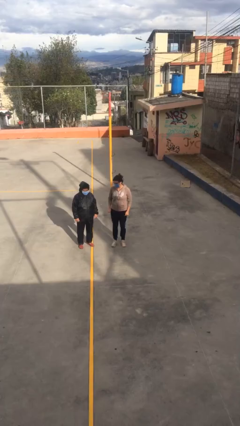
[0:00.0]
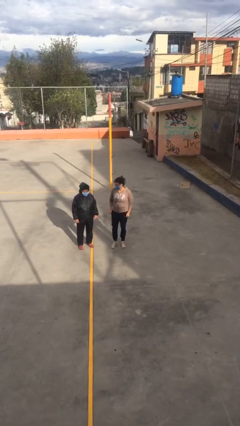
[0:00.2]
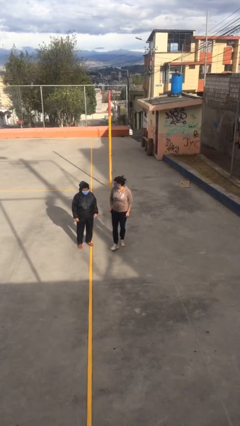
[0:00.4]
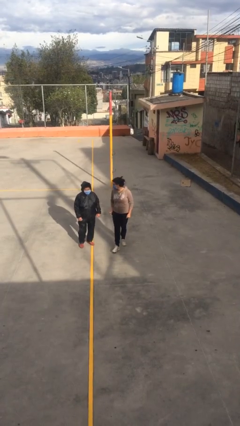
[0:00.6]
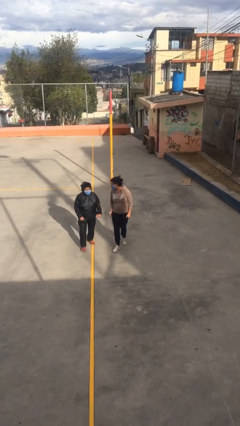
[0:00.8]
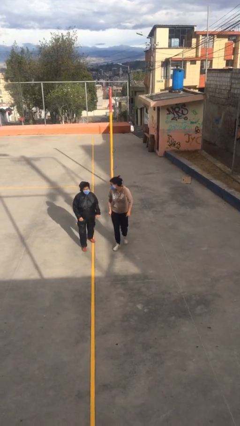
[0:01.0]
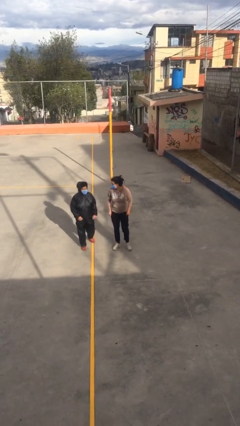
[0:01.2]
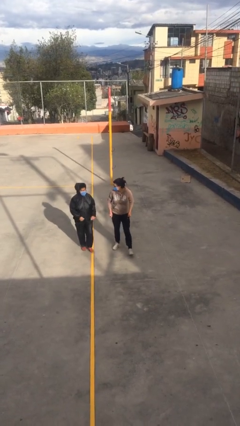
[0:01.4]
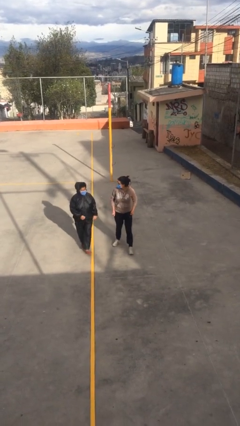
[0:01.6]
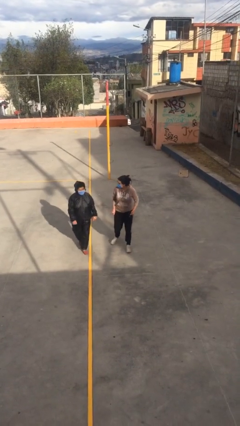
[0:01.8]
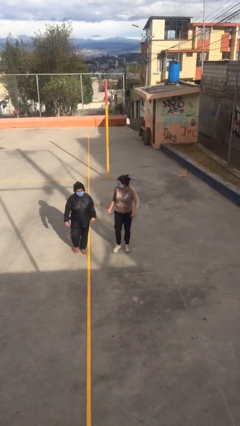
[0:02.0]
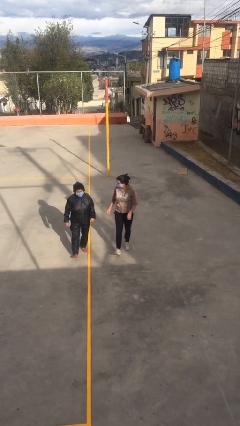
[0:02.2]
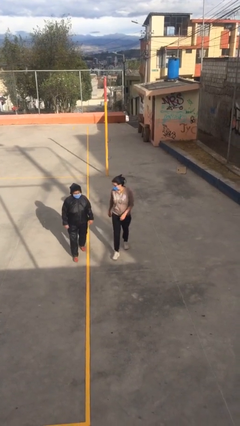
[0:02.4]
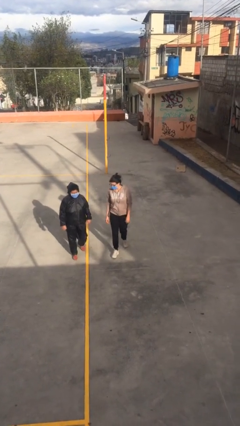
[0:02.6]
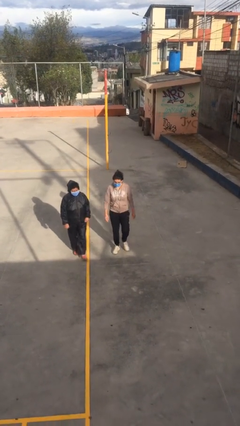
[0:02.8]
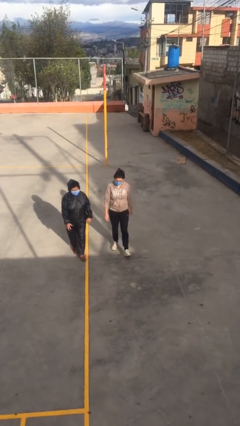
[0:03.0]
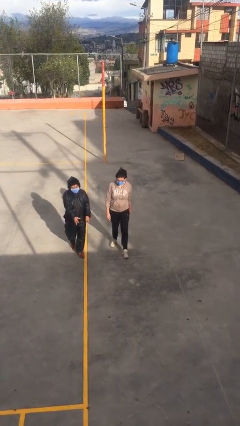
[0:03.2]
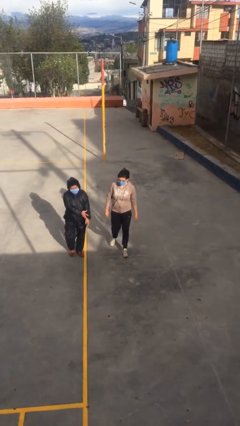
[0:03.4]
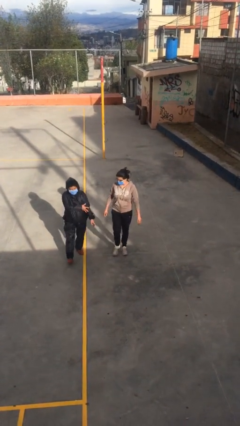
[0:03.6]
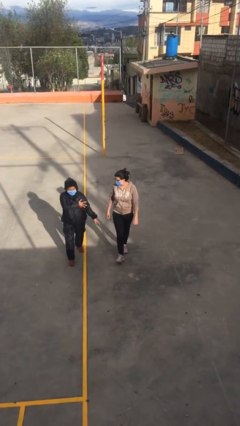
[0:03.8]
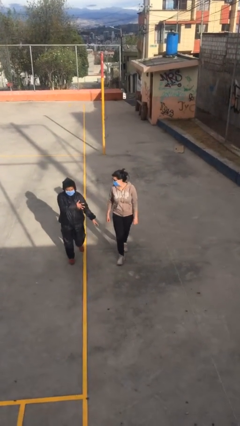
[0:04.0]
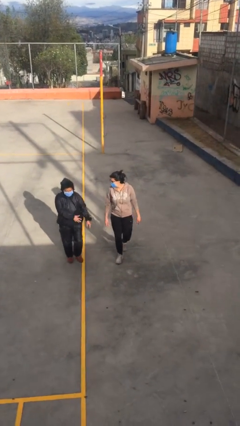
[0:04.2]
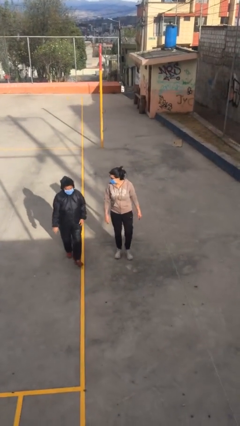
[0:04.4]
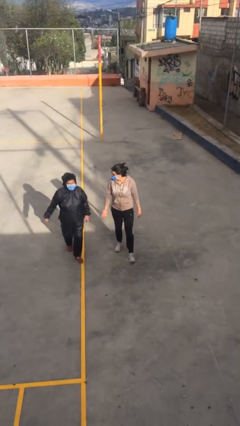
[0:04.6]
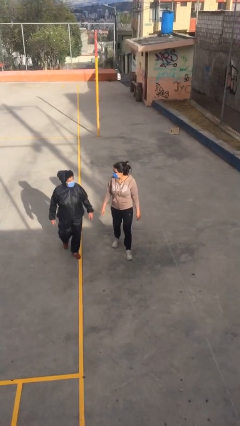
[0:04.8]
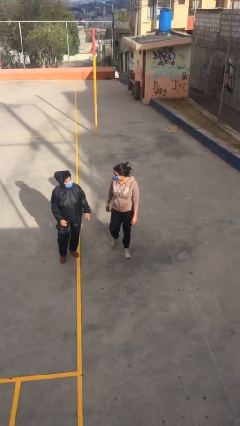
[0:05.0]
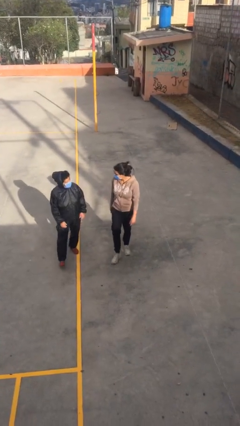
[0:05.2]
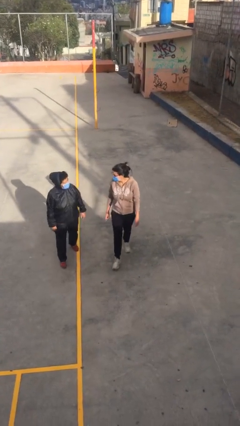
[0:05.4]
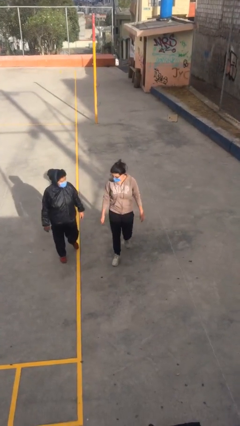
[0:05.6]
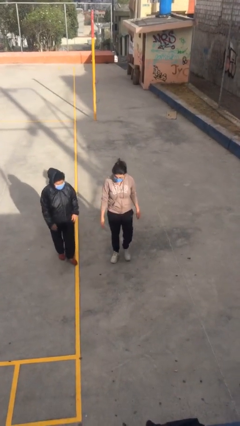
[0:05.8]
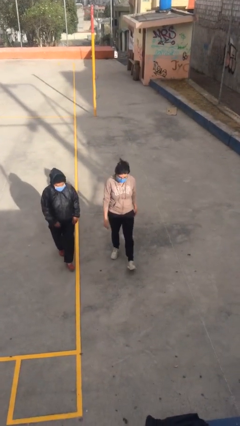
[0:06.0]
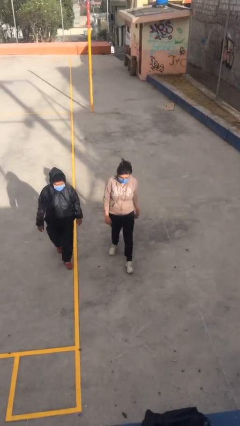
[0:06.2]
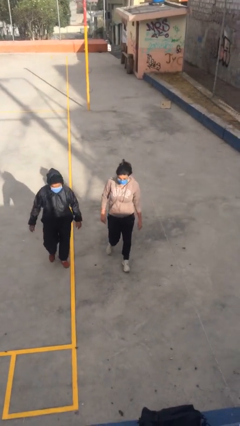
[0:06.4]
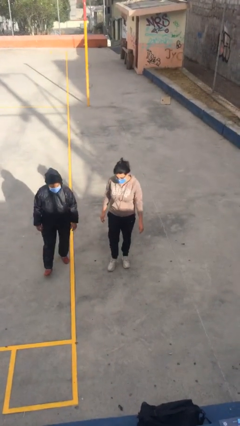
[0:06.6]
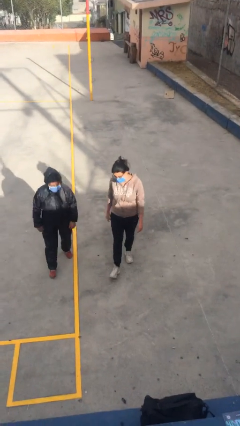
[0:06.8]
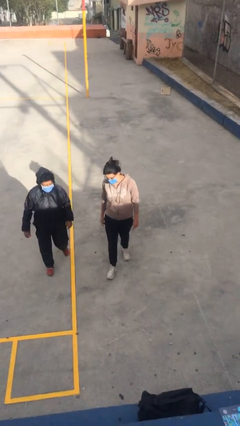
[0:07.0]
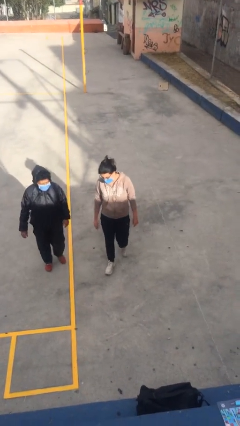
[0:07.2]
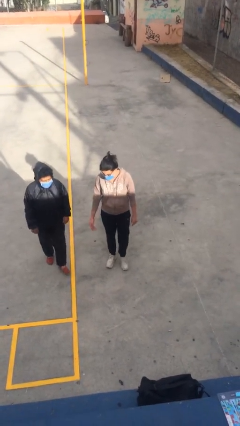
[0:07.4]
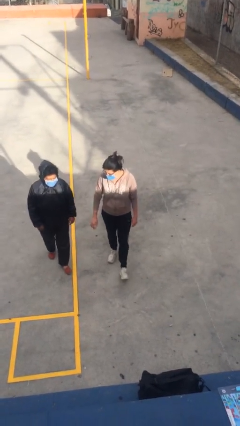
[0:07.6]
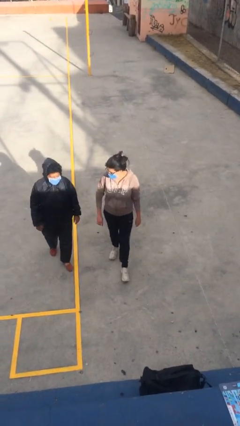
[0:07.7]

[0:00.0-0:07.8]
person talks to person

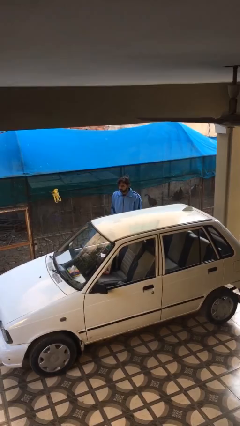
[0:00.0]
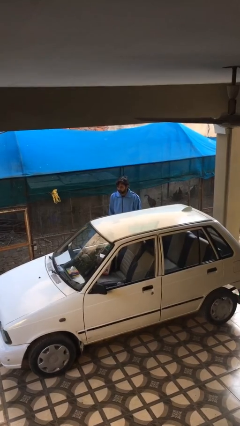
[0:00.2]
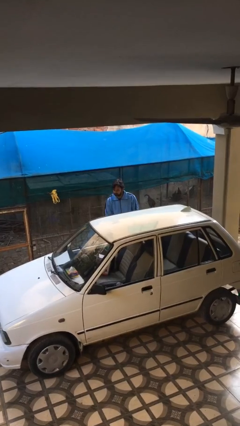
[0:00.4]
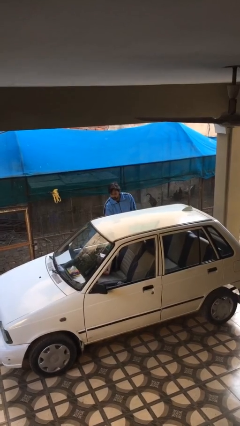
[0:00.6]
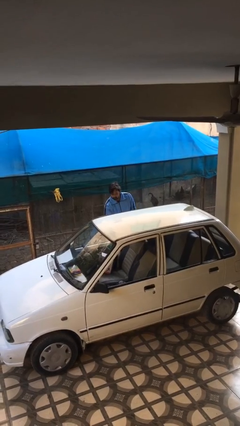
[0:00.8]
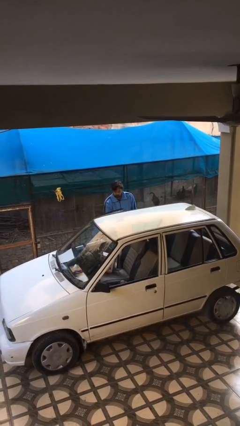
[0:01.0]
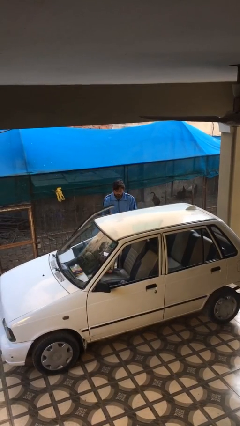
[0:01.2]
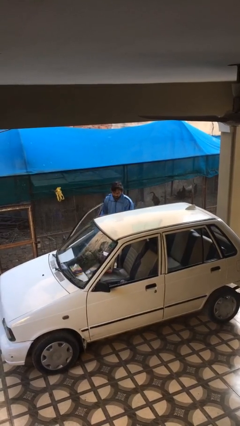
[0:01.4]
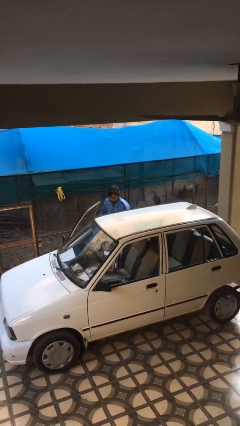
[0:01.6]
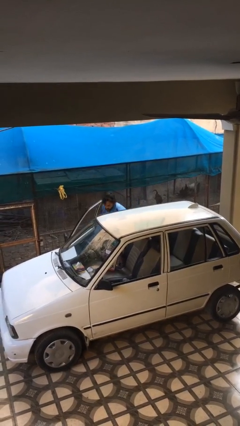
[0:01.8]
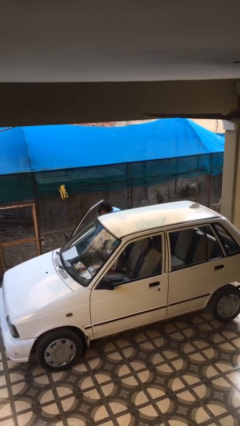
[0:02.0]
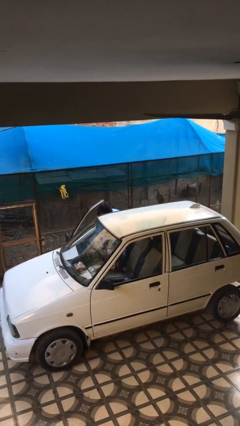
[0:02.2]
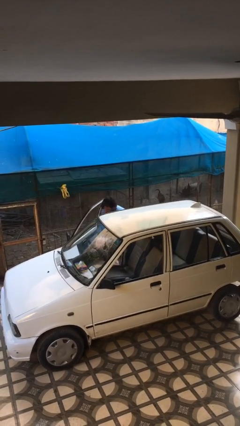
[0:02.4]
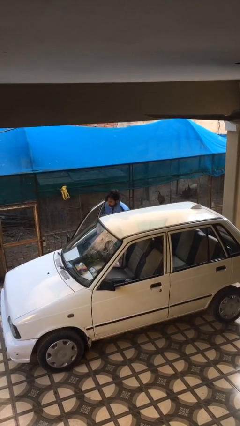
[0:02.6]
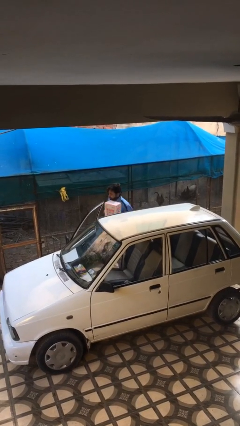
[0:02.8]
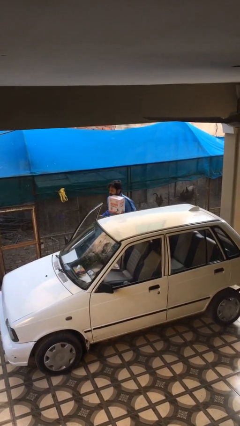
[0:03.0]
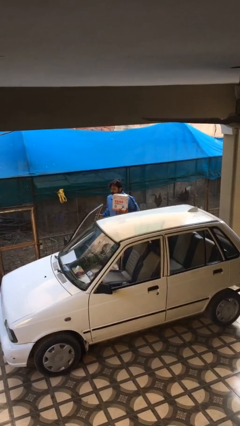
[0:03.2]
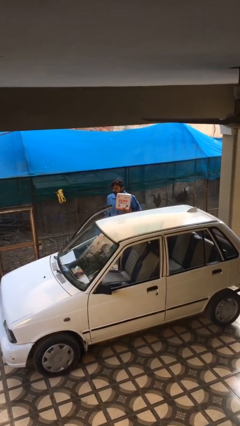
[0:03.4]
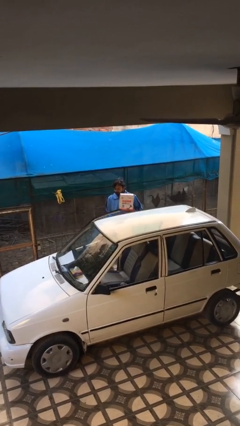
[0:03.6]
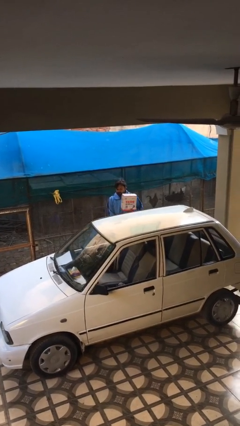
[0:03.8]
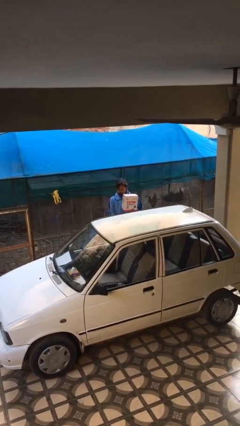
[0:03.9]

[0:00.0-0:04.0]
person unloads car

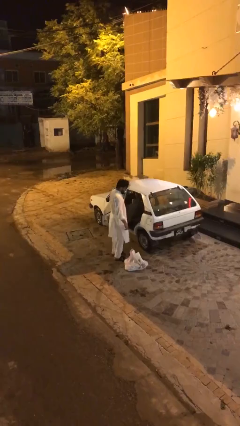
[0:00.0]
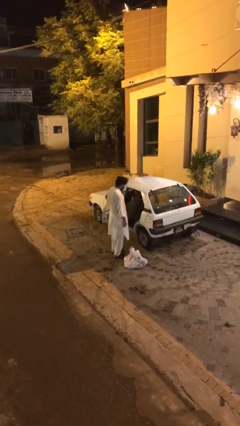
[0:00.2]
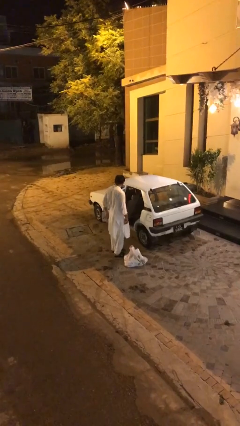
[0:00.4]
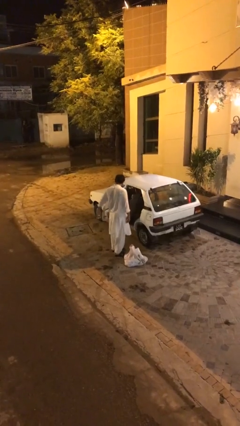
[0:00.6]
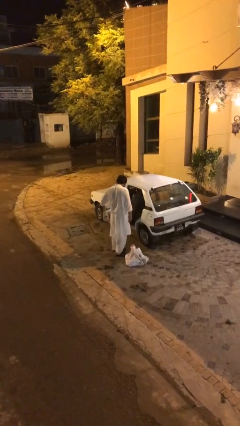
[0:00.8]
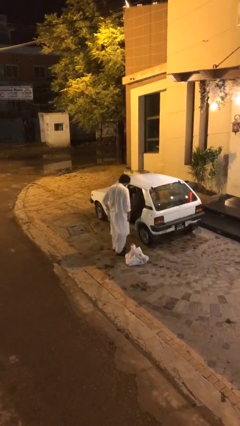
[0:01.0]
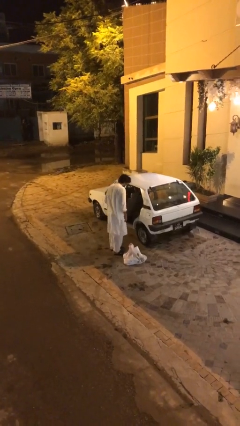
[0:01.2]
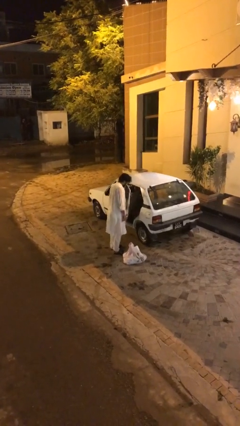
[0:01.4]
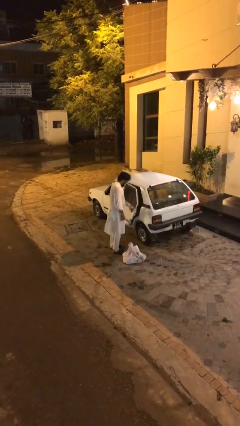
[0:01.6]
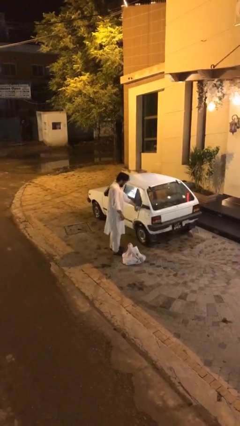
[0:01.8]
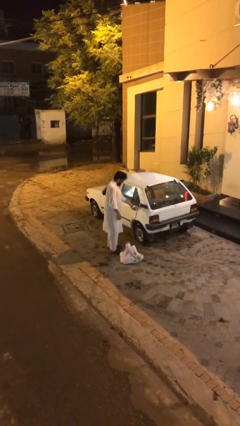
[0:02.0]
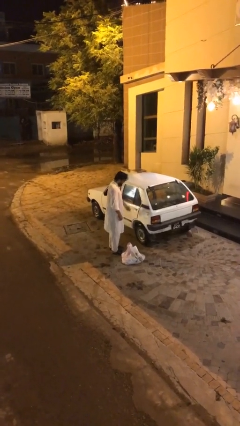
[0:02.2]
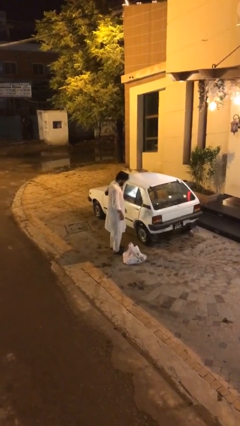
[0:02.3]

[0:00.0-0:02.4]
person closes car door

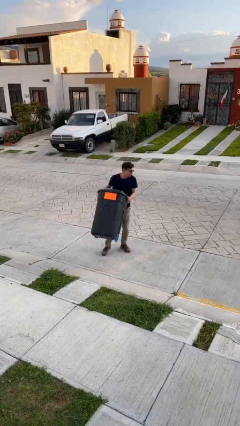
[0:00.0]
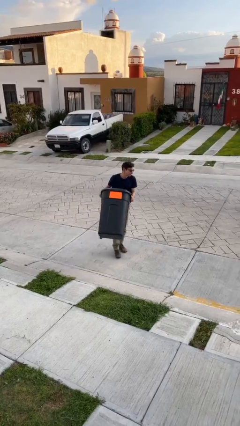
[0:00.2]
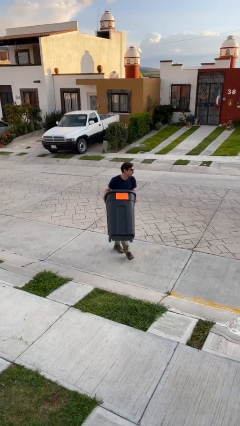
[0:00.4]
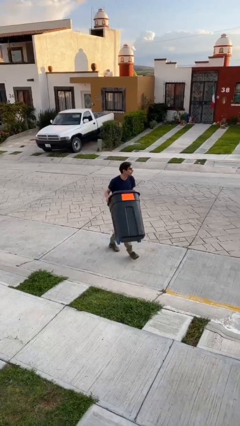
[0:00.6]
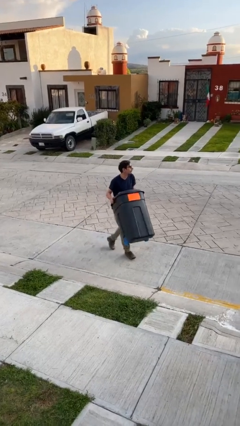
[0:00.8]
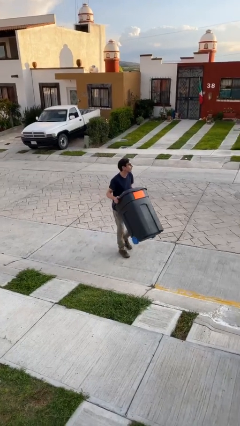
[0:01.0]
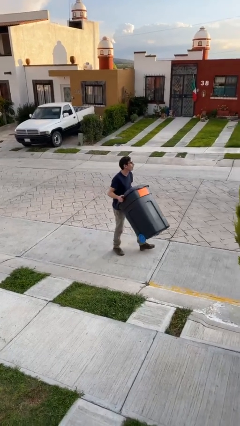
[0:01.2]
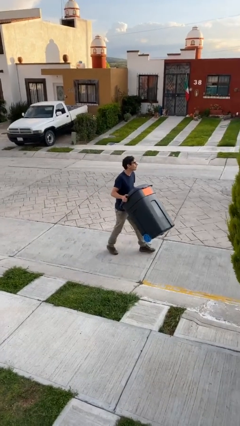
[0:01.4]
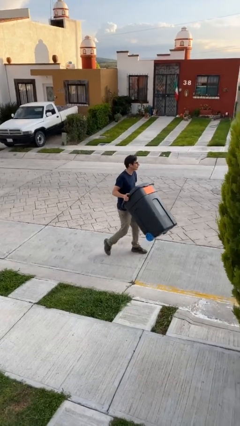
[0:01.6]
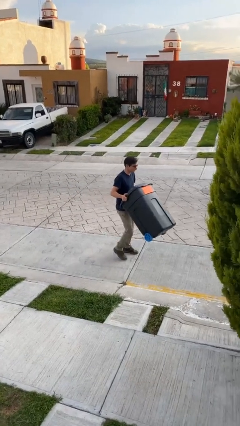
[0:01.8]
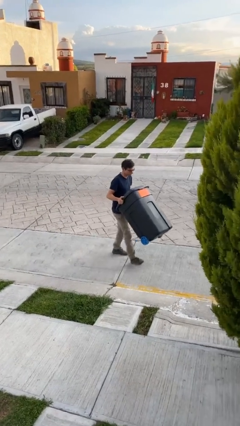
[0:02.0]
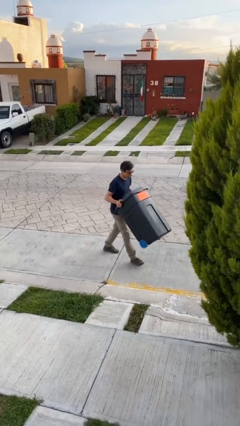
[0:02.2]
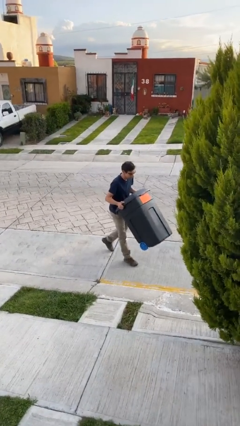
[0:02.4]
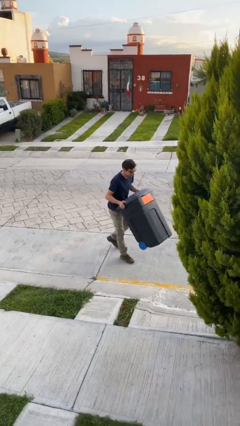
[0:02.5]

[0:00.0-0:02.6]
person carries heavy object

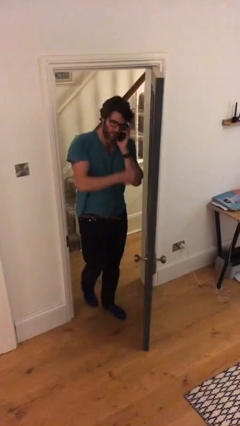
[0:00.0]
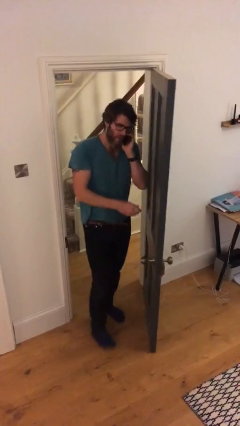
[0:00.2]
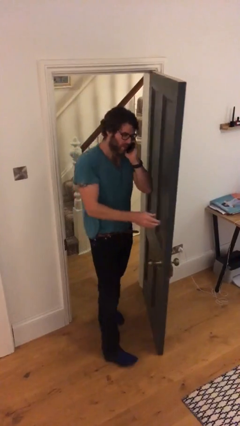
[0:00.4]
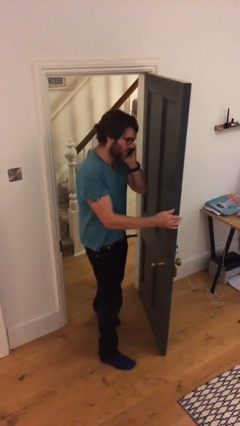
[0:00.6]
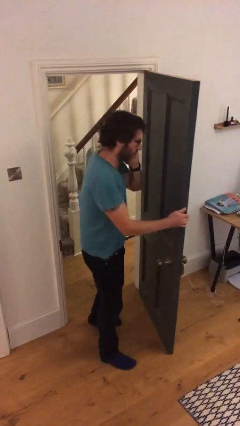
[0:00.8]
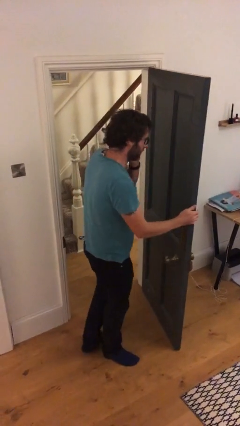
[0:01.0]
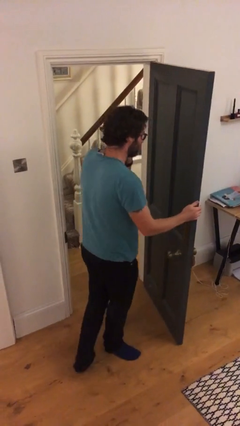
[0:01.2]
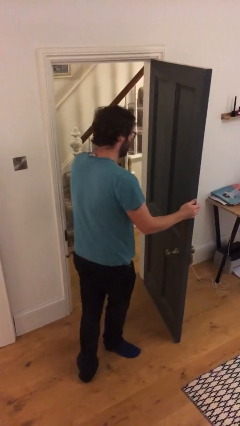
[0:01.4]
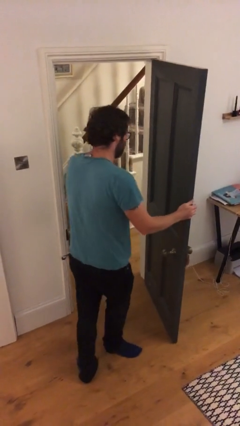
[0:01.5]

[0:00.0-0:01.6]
person enters scene through structure
